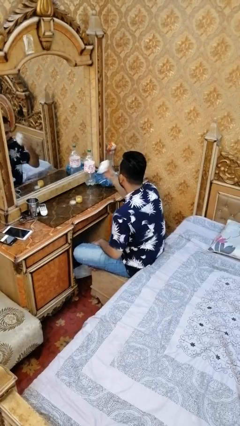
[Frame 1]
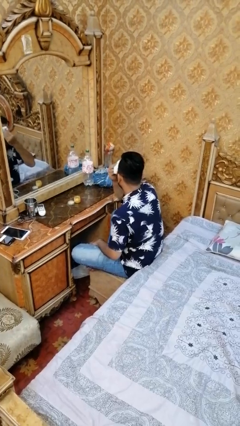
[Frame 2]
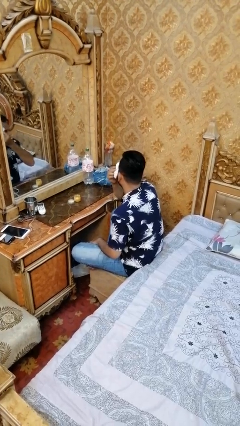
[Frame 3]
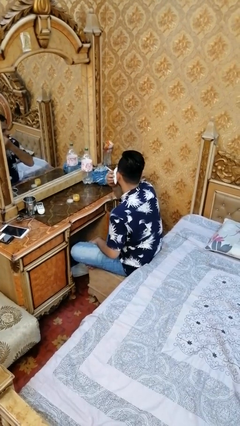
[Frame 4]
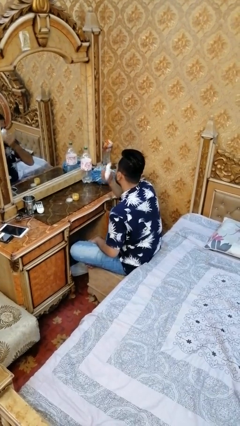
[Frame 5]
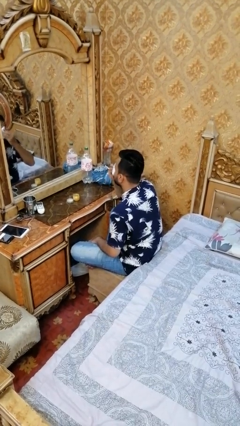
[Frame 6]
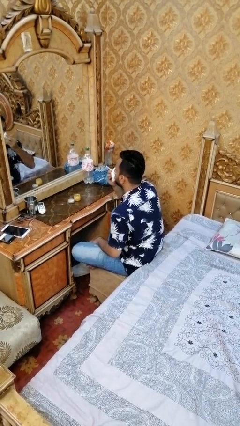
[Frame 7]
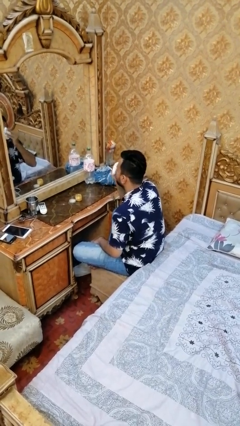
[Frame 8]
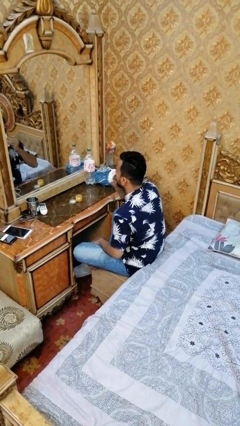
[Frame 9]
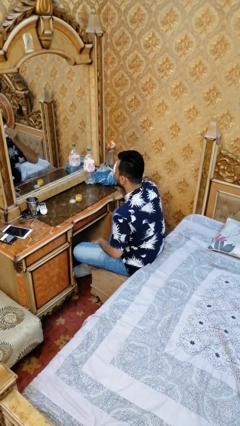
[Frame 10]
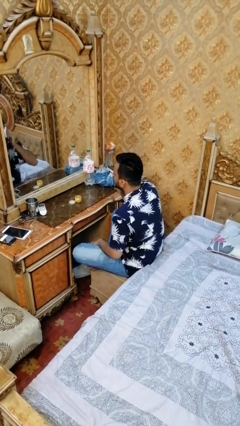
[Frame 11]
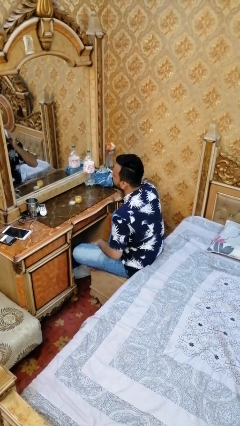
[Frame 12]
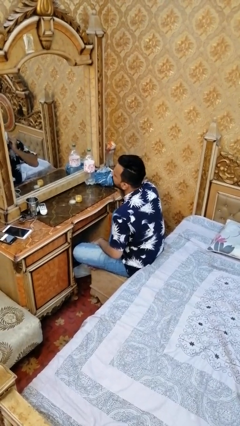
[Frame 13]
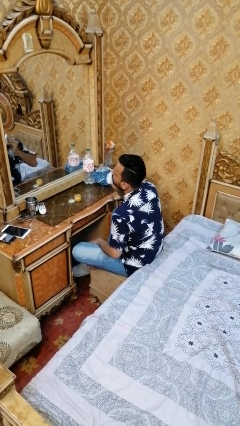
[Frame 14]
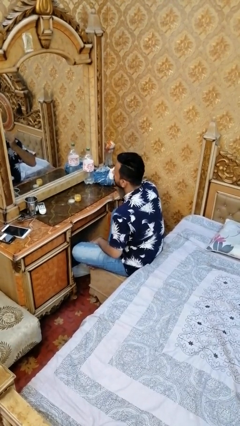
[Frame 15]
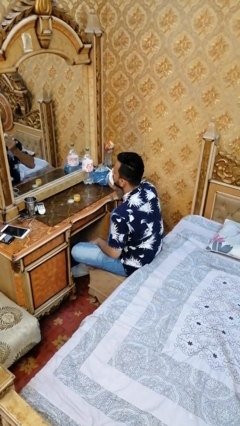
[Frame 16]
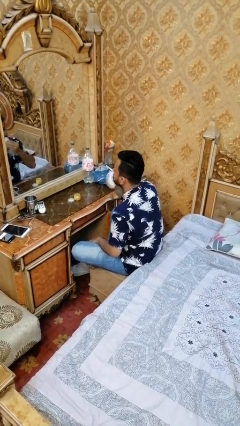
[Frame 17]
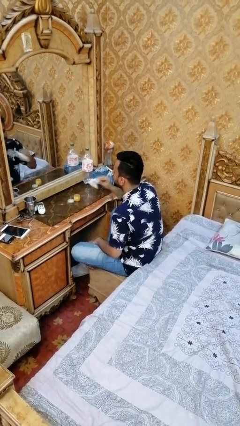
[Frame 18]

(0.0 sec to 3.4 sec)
person takes off facemask

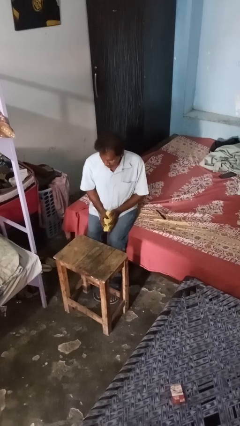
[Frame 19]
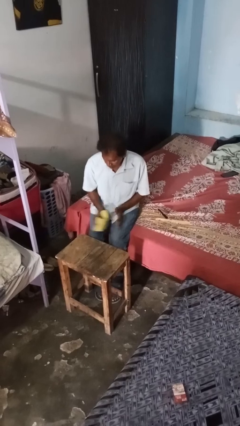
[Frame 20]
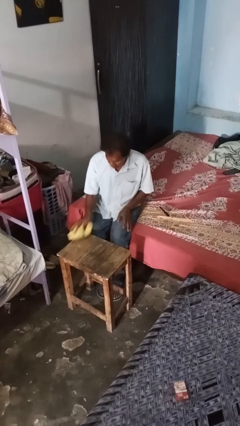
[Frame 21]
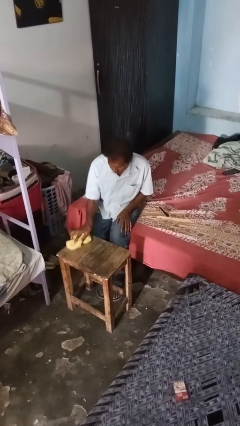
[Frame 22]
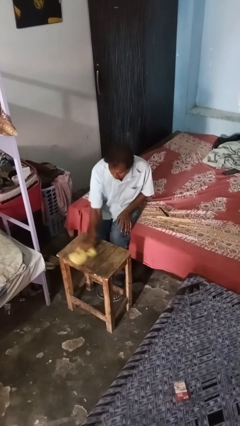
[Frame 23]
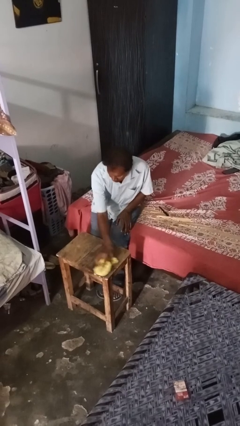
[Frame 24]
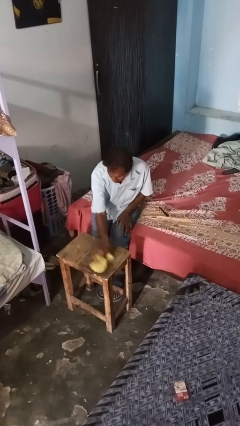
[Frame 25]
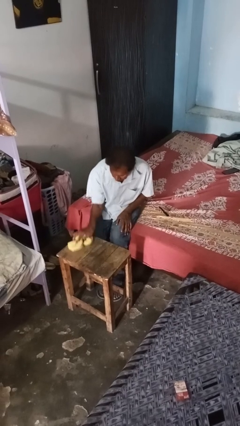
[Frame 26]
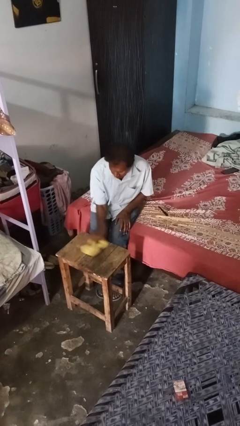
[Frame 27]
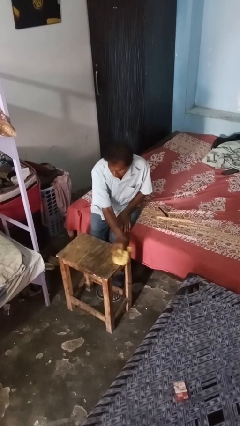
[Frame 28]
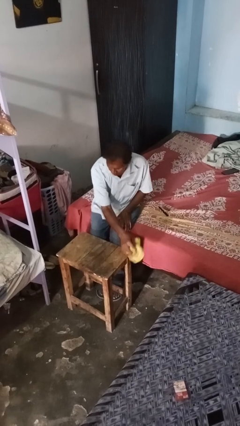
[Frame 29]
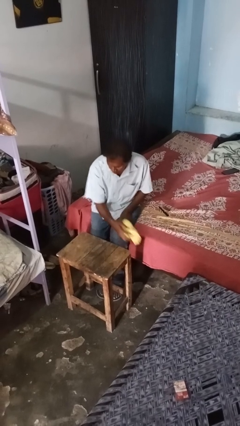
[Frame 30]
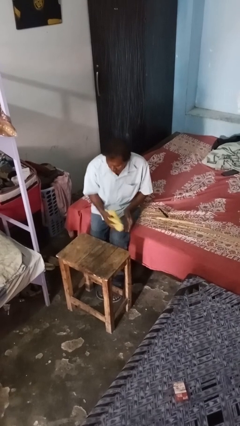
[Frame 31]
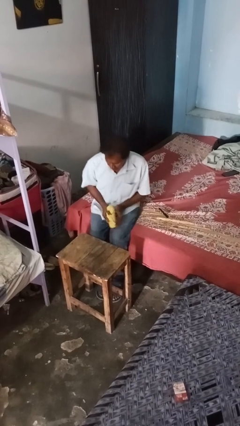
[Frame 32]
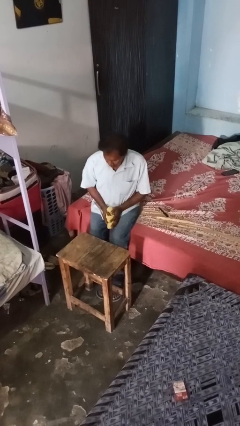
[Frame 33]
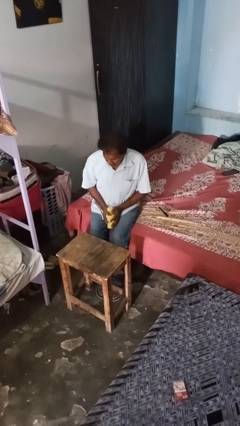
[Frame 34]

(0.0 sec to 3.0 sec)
person cleans table with rag

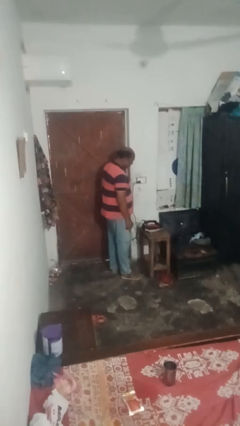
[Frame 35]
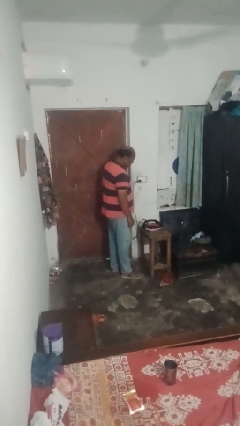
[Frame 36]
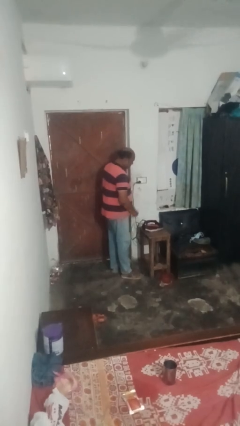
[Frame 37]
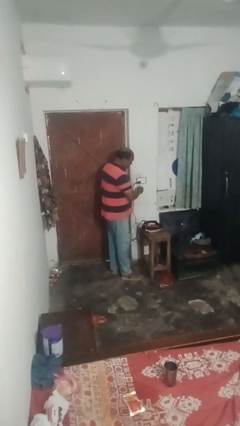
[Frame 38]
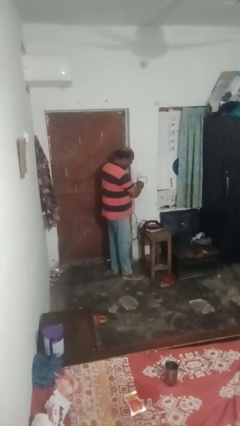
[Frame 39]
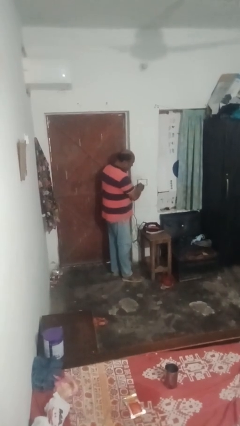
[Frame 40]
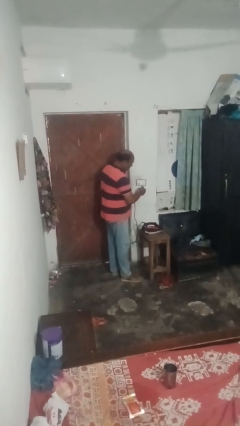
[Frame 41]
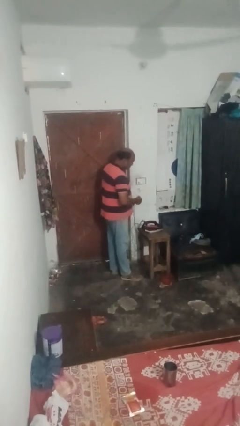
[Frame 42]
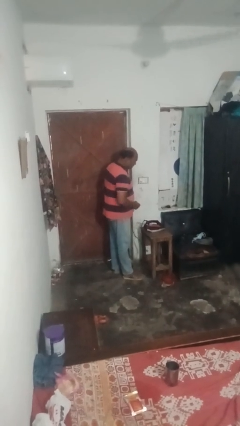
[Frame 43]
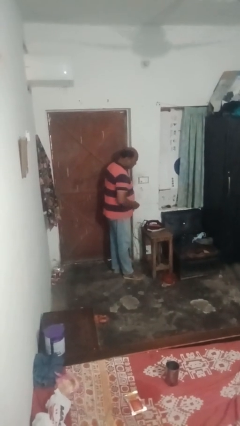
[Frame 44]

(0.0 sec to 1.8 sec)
person unplugs from electrical socket

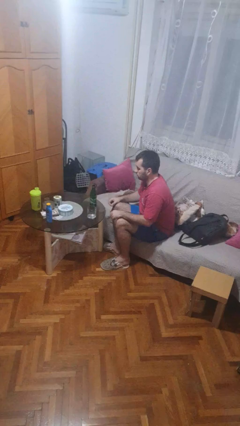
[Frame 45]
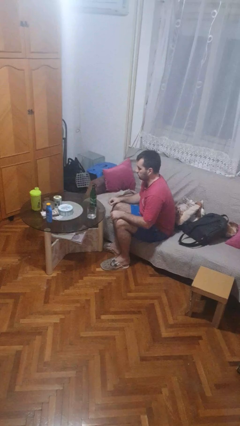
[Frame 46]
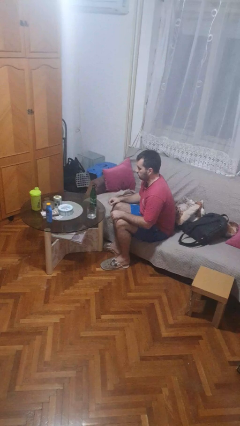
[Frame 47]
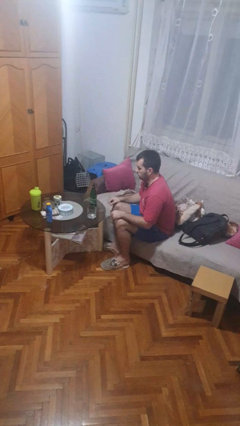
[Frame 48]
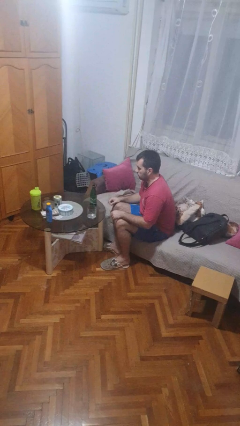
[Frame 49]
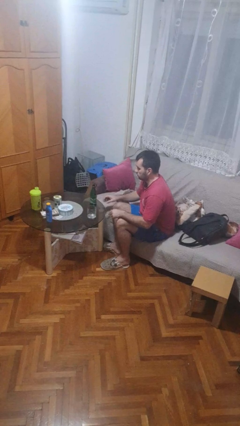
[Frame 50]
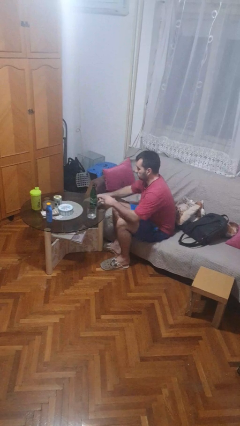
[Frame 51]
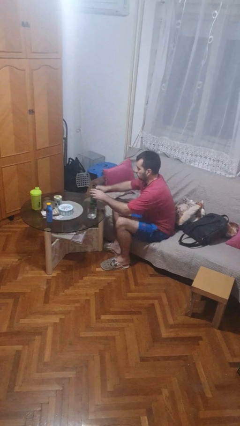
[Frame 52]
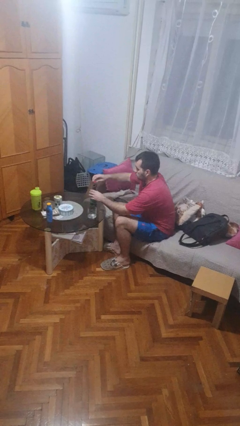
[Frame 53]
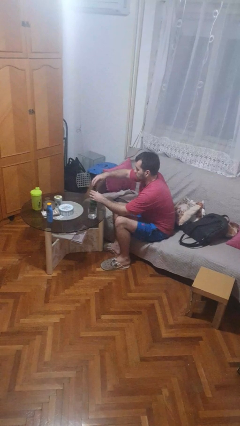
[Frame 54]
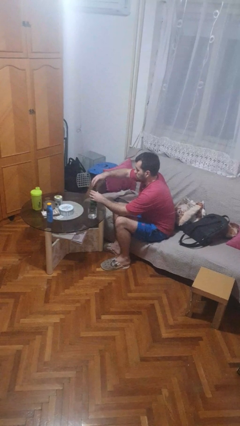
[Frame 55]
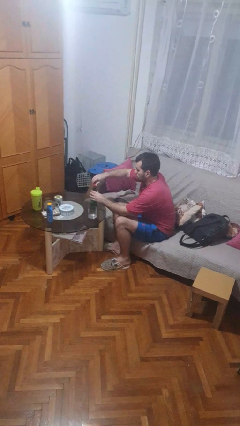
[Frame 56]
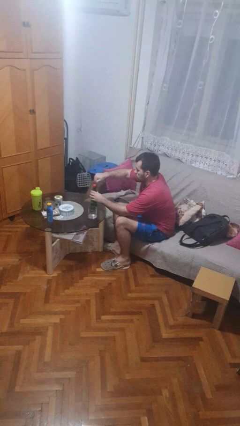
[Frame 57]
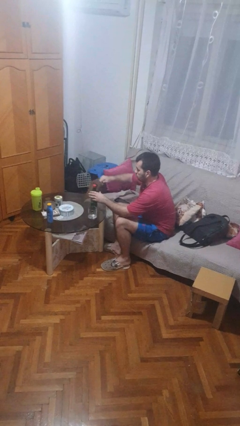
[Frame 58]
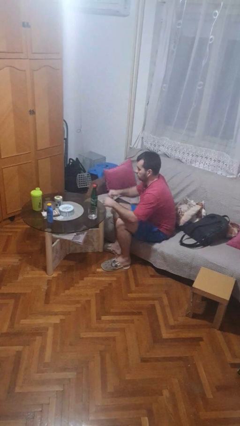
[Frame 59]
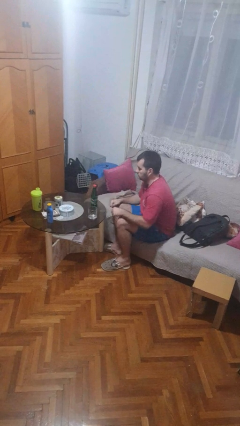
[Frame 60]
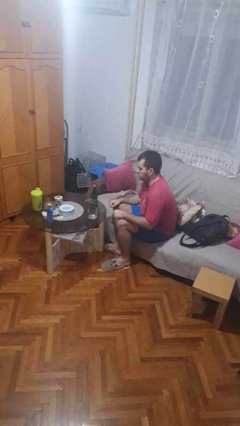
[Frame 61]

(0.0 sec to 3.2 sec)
person screws lid to bottle

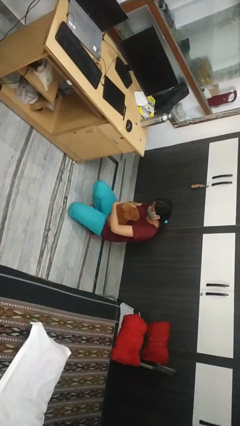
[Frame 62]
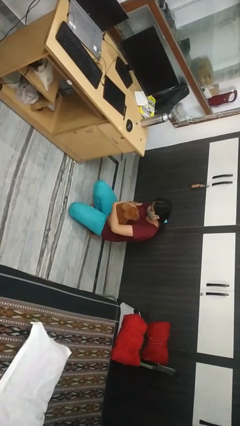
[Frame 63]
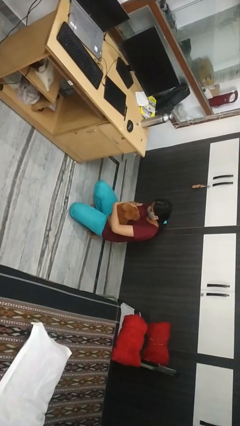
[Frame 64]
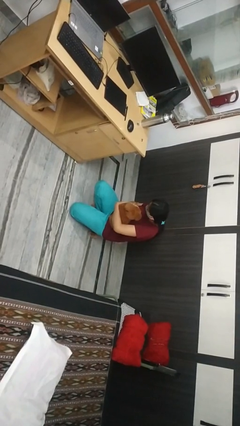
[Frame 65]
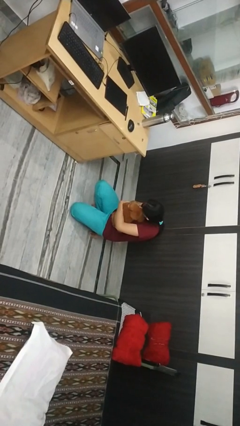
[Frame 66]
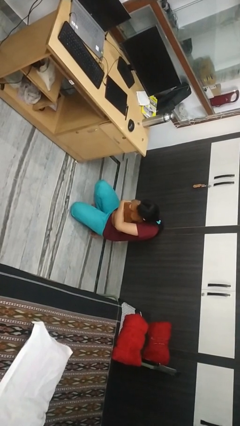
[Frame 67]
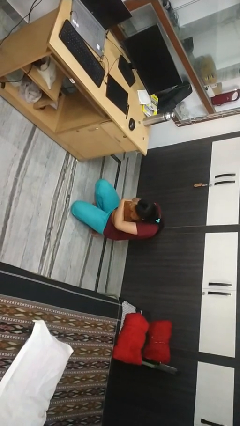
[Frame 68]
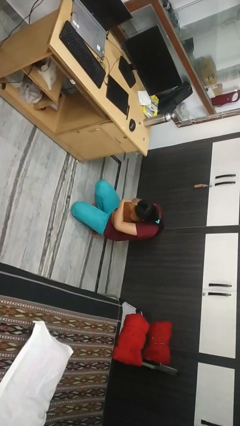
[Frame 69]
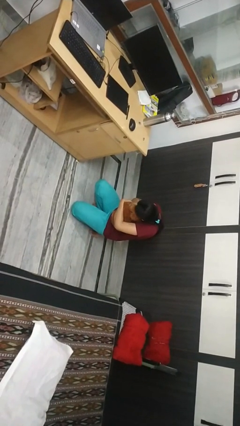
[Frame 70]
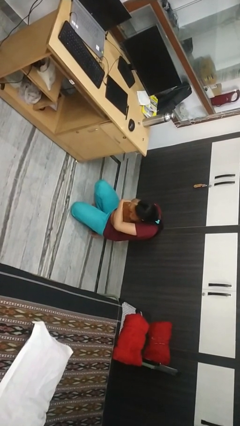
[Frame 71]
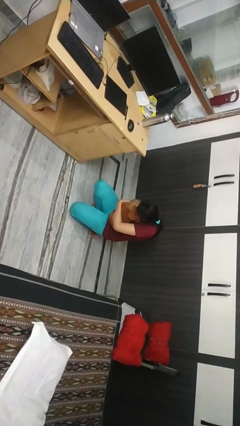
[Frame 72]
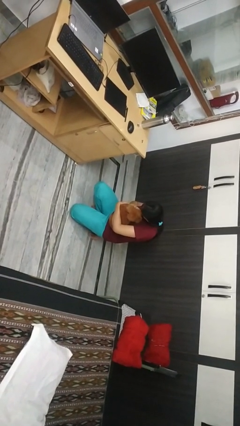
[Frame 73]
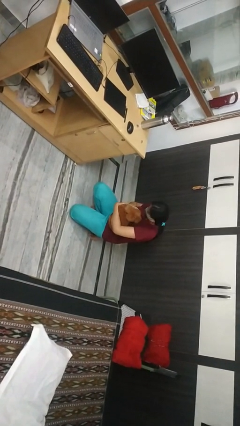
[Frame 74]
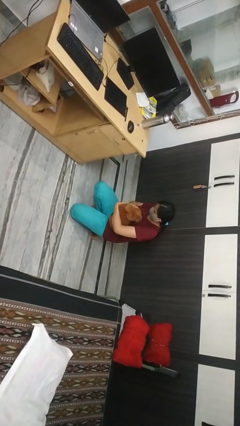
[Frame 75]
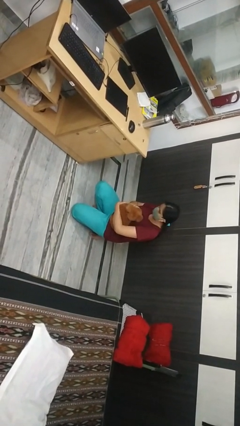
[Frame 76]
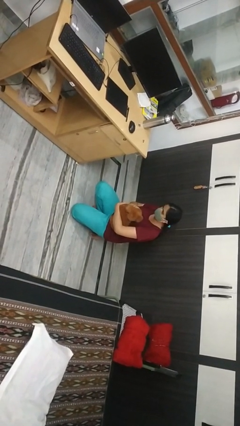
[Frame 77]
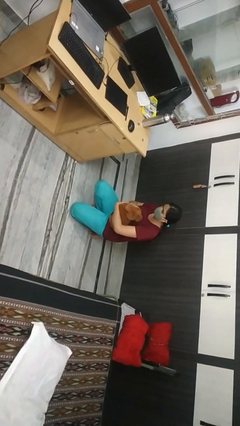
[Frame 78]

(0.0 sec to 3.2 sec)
person hugs dog

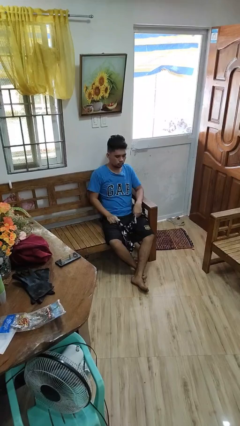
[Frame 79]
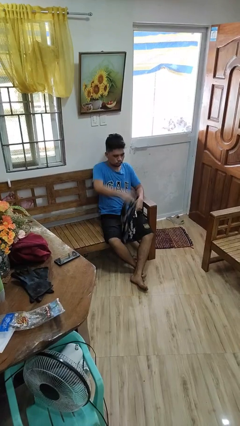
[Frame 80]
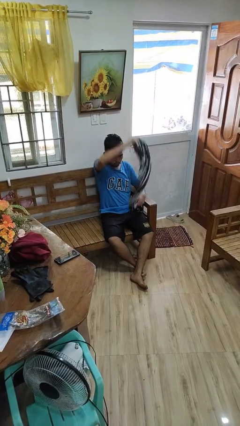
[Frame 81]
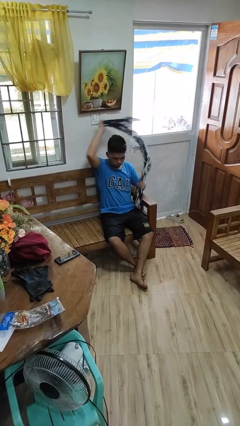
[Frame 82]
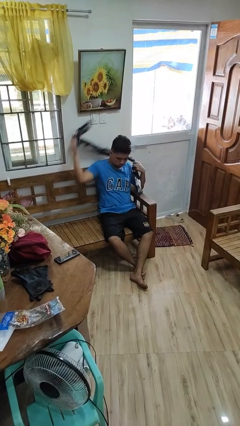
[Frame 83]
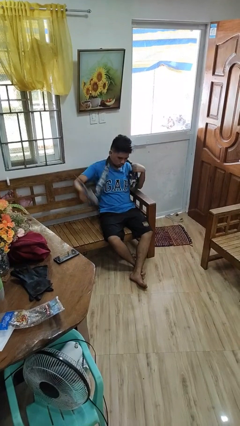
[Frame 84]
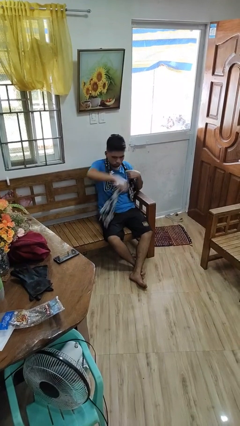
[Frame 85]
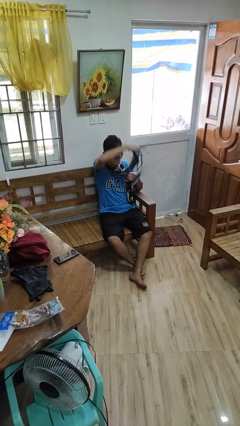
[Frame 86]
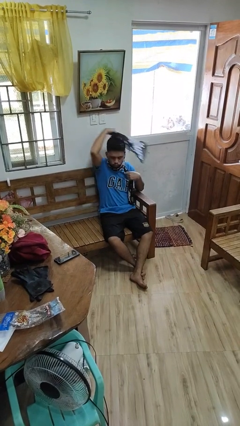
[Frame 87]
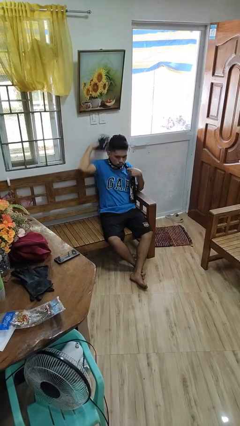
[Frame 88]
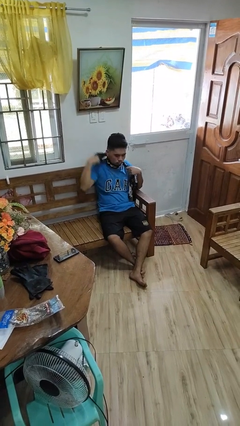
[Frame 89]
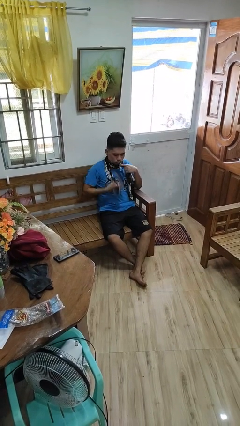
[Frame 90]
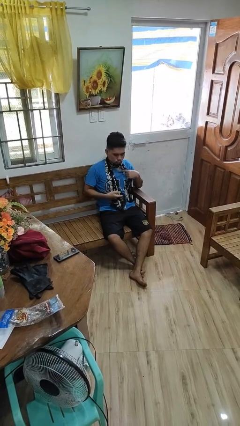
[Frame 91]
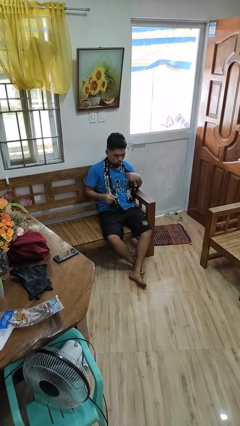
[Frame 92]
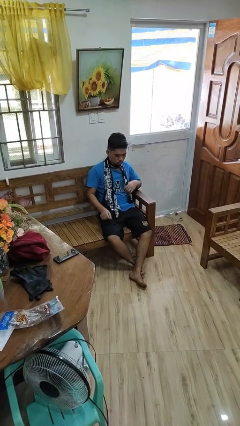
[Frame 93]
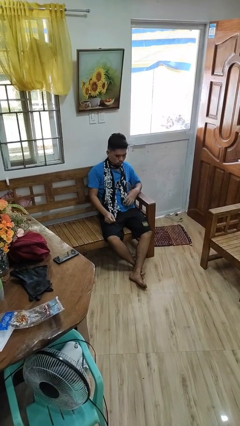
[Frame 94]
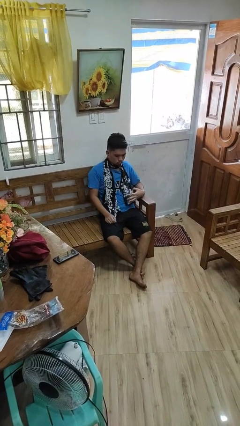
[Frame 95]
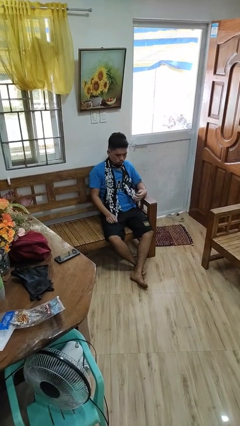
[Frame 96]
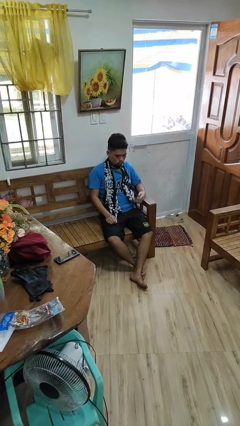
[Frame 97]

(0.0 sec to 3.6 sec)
person puts on scarf
